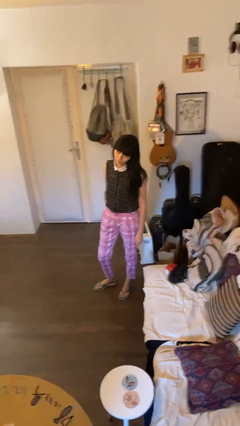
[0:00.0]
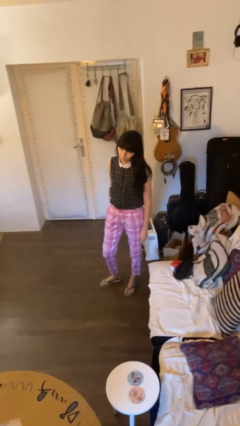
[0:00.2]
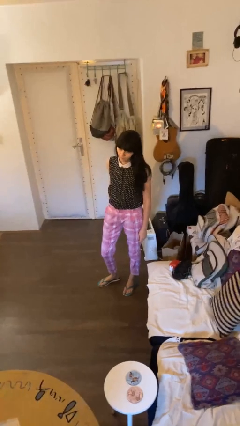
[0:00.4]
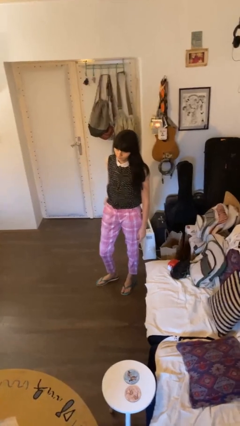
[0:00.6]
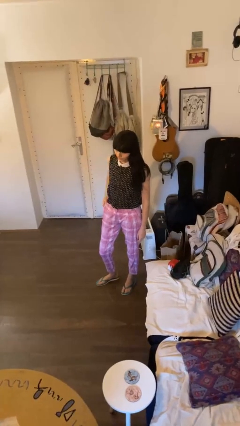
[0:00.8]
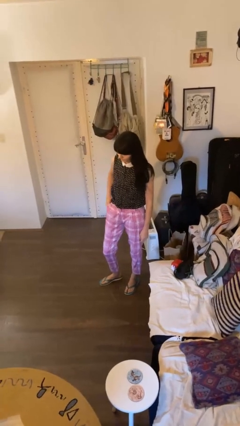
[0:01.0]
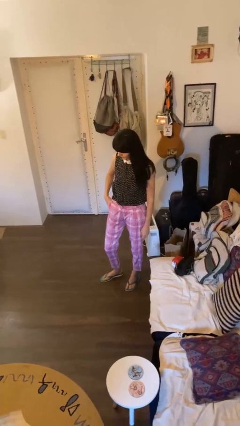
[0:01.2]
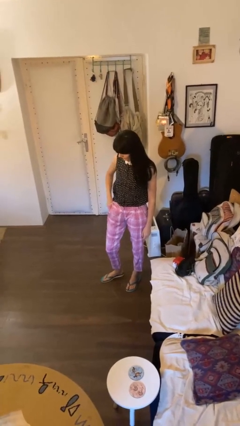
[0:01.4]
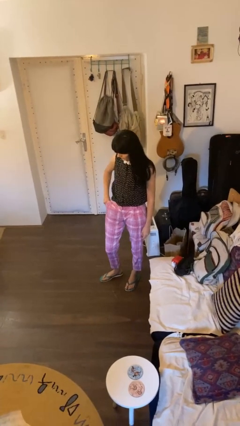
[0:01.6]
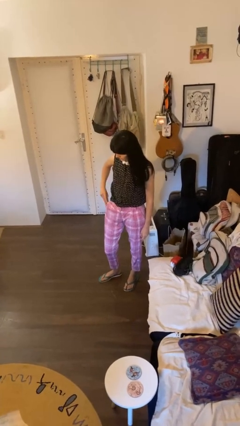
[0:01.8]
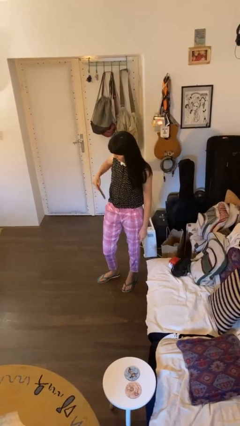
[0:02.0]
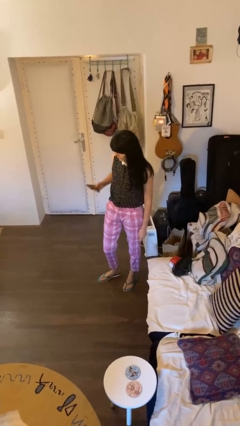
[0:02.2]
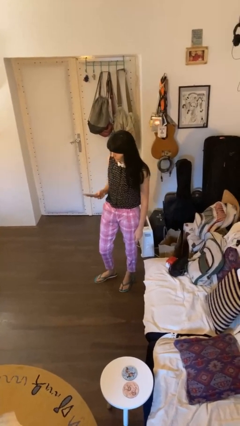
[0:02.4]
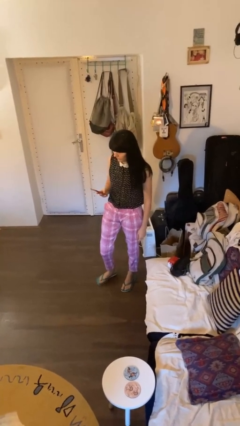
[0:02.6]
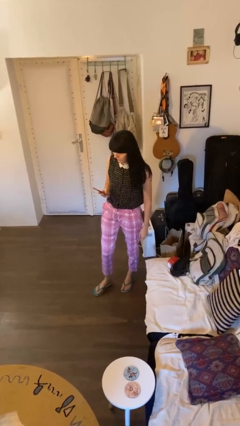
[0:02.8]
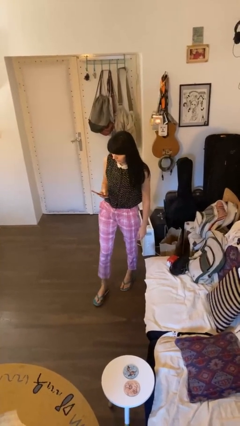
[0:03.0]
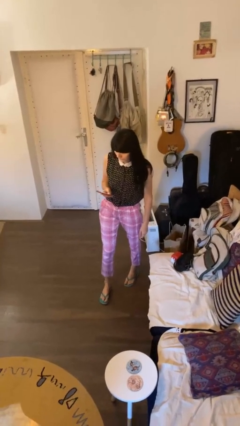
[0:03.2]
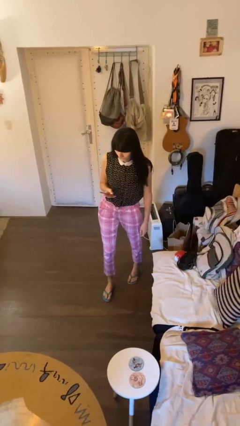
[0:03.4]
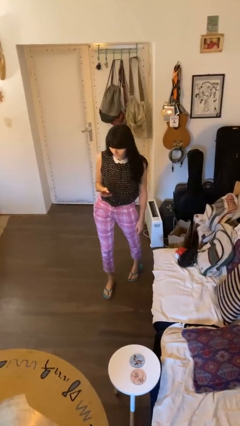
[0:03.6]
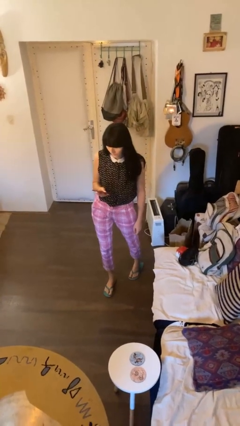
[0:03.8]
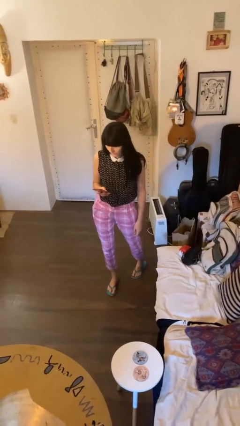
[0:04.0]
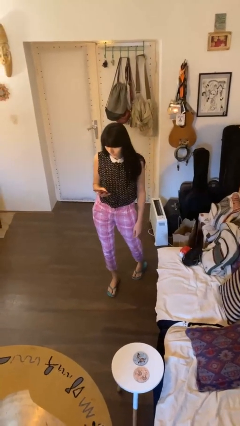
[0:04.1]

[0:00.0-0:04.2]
person takes phone from pocket

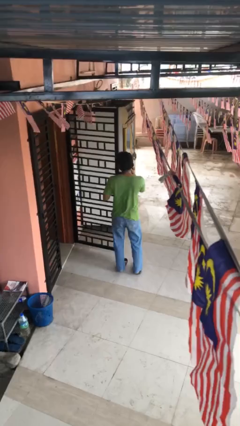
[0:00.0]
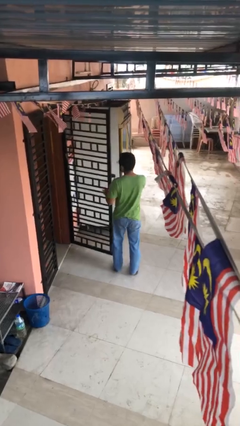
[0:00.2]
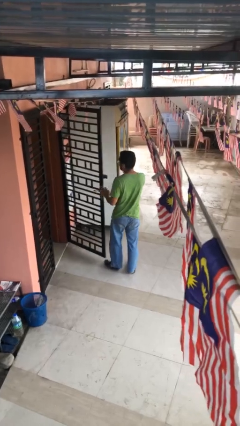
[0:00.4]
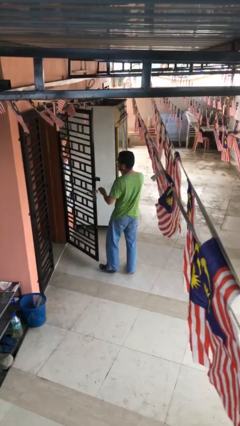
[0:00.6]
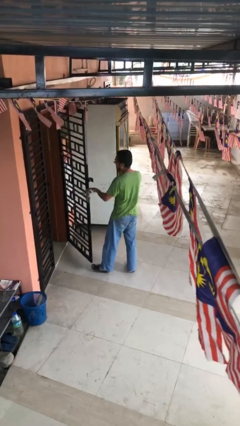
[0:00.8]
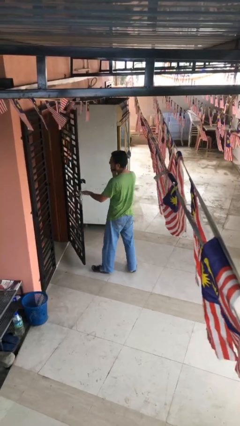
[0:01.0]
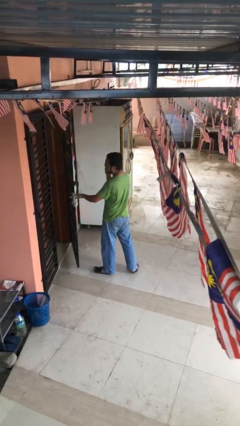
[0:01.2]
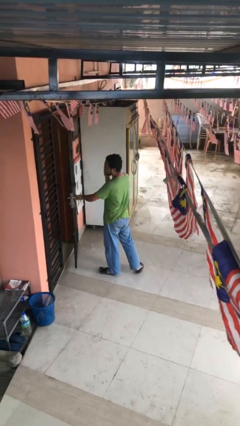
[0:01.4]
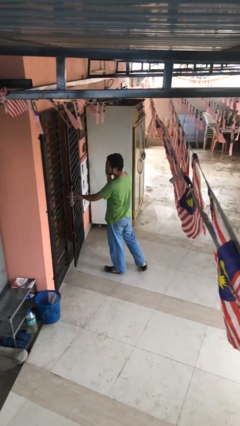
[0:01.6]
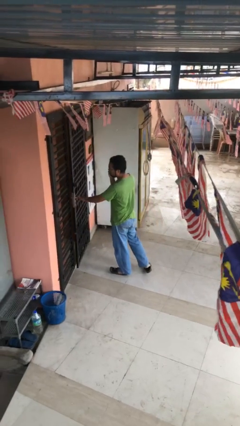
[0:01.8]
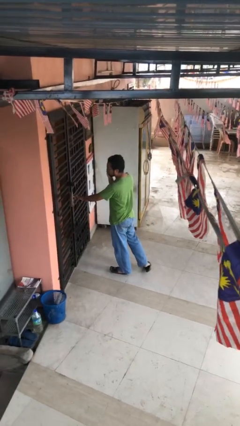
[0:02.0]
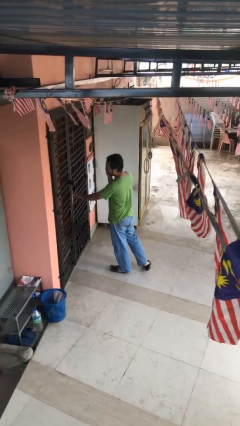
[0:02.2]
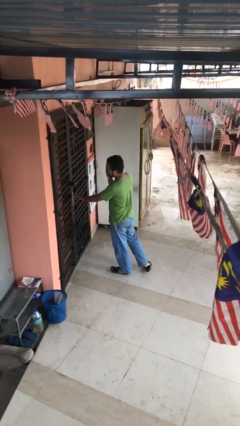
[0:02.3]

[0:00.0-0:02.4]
person closes facility door

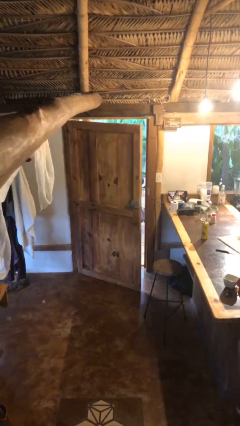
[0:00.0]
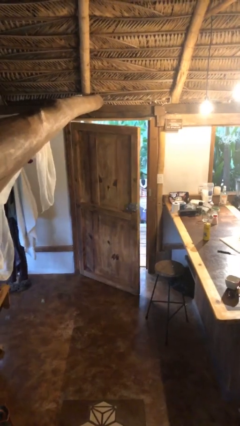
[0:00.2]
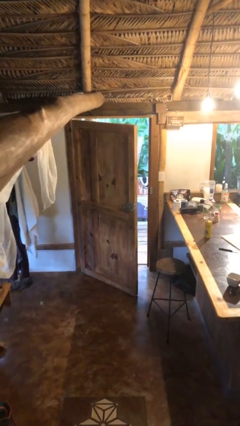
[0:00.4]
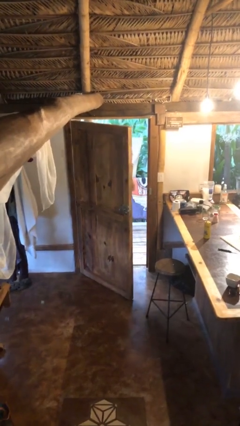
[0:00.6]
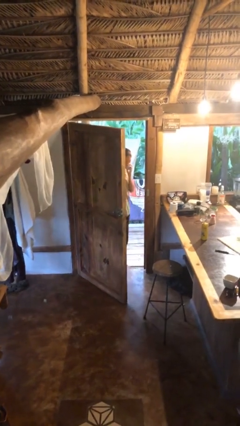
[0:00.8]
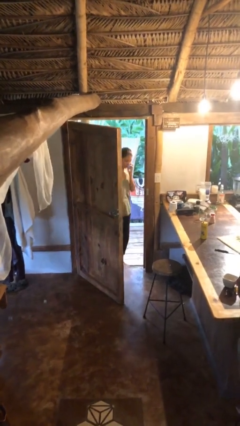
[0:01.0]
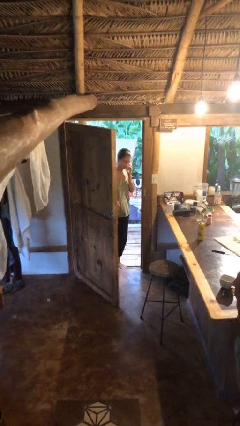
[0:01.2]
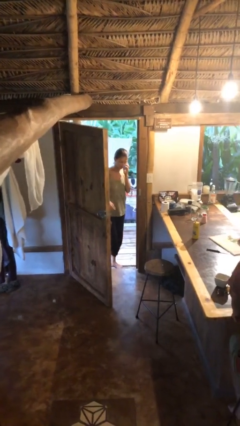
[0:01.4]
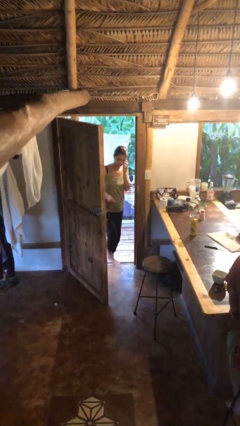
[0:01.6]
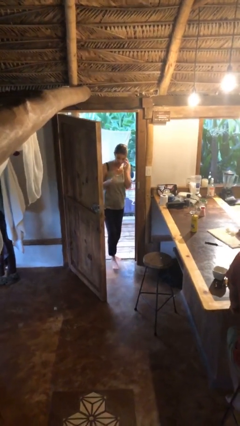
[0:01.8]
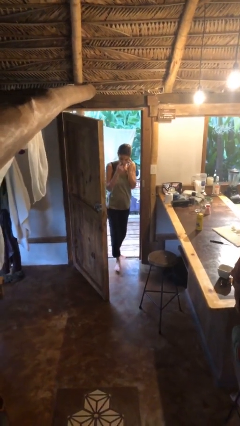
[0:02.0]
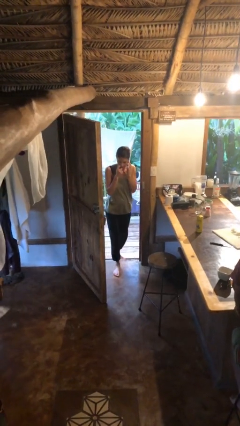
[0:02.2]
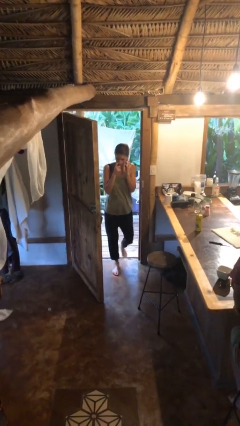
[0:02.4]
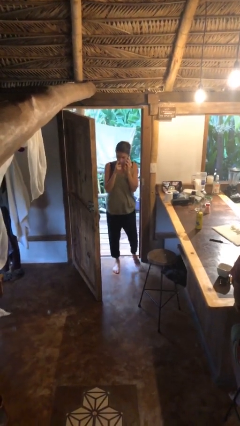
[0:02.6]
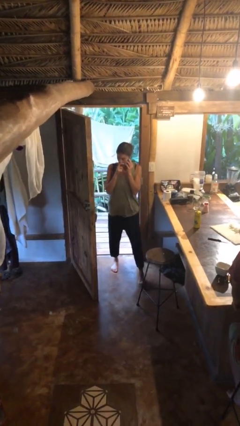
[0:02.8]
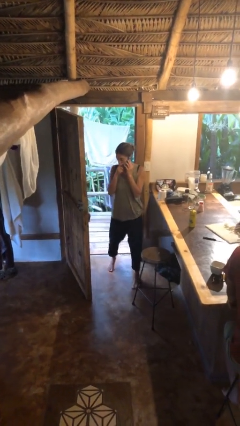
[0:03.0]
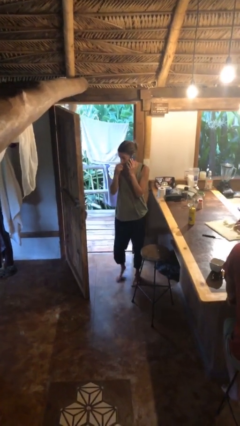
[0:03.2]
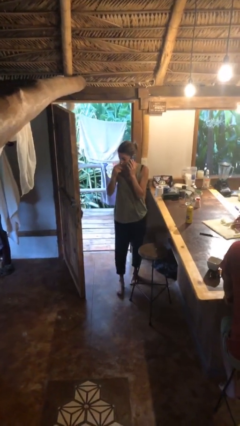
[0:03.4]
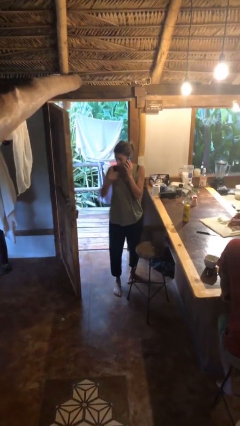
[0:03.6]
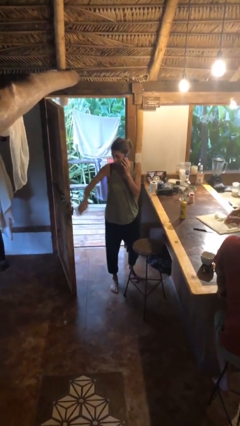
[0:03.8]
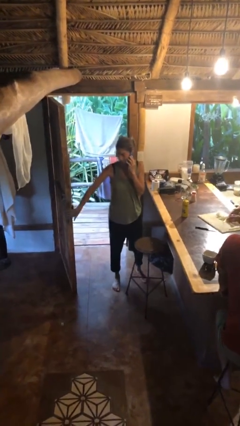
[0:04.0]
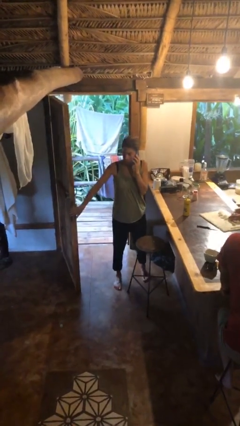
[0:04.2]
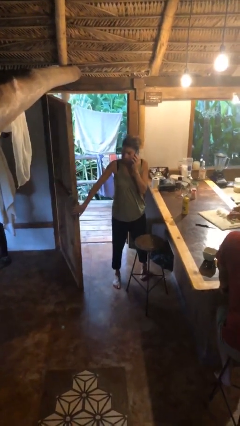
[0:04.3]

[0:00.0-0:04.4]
person enters scene through structure

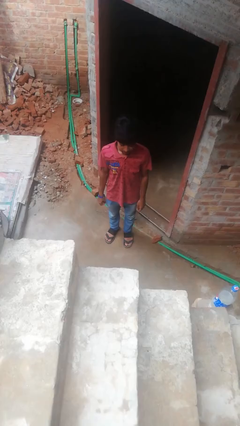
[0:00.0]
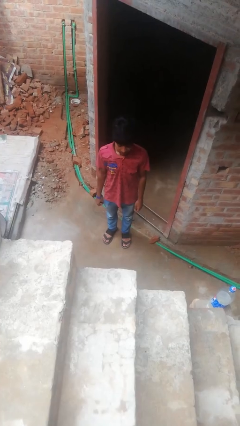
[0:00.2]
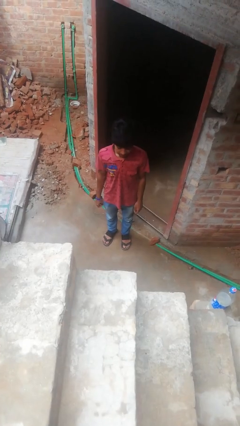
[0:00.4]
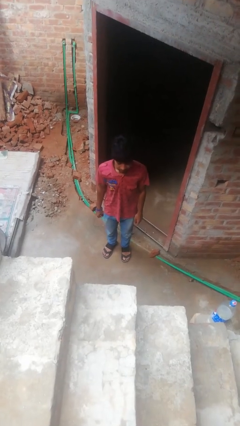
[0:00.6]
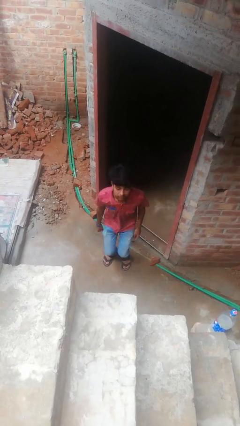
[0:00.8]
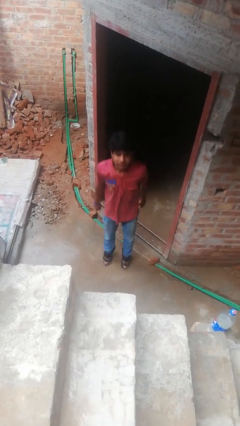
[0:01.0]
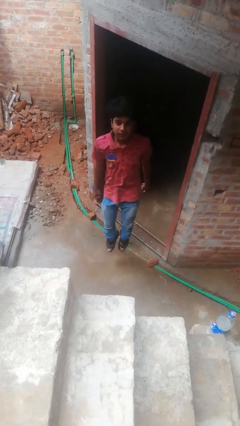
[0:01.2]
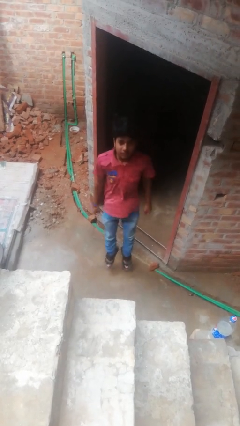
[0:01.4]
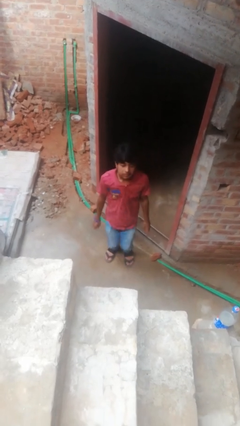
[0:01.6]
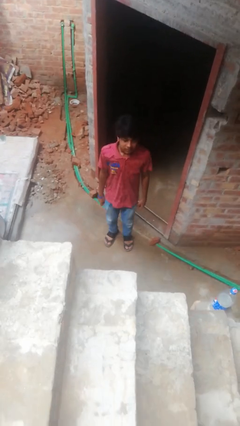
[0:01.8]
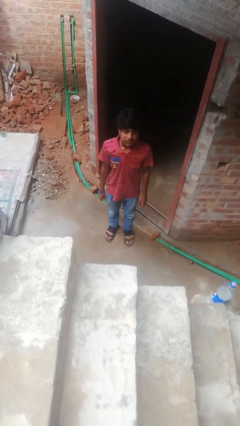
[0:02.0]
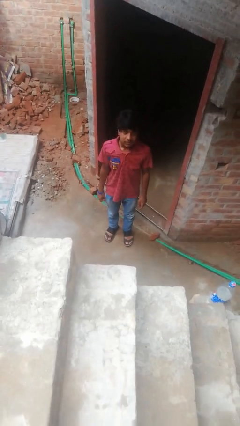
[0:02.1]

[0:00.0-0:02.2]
person jumps

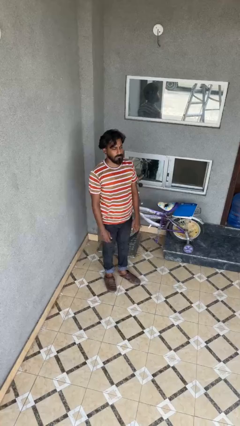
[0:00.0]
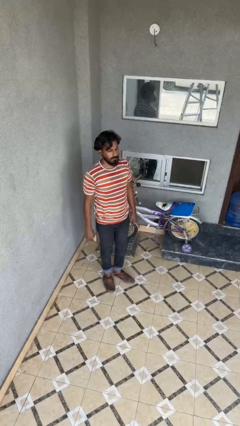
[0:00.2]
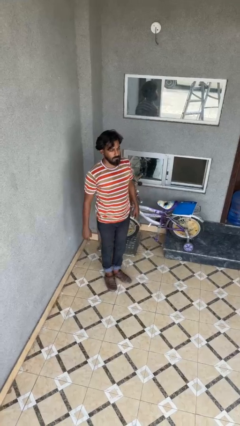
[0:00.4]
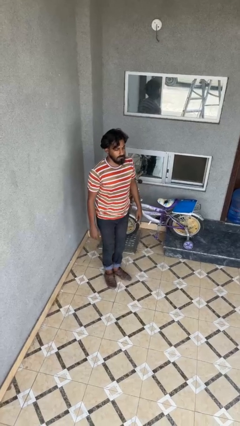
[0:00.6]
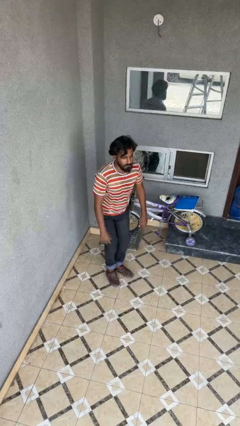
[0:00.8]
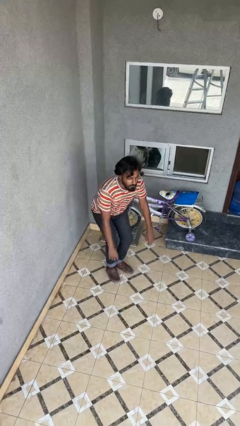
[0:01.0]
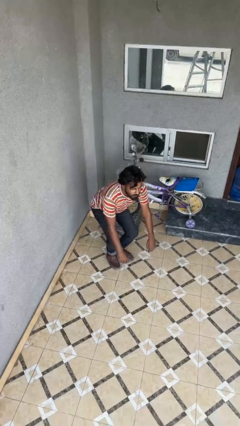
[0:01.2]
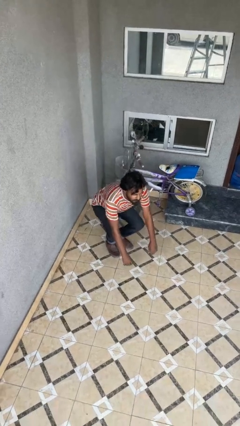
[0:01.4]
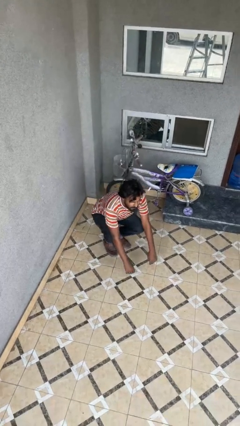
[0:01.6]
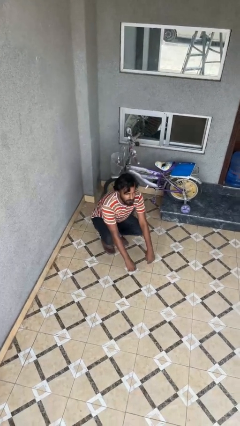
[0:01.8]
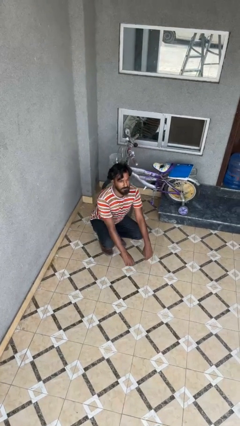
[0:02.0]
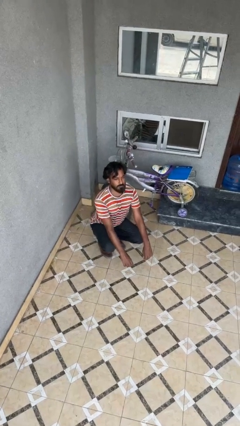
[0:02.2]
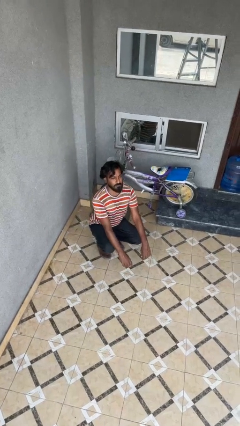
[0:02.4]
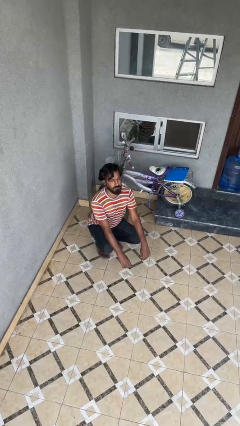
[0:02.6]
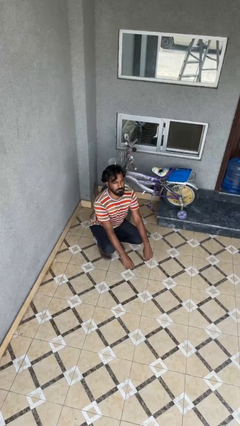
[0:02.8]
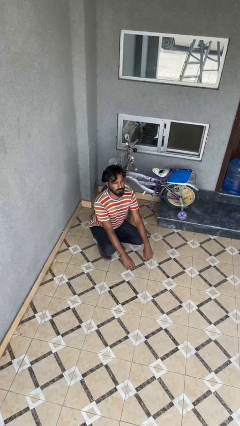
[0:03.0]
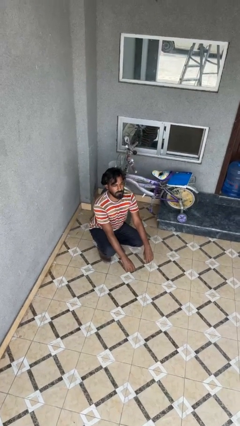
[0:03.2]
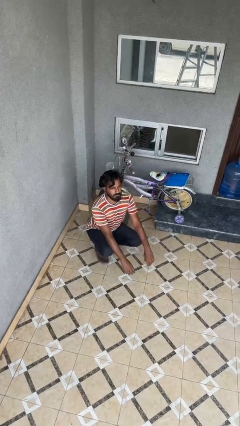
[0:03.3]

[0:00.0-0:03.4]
person squats

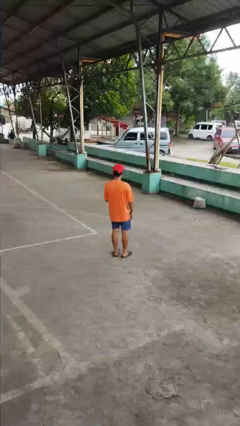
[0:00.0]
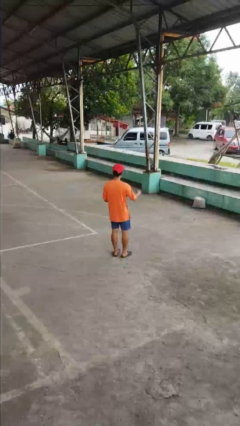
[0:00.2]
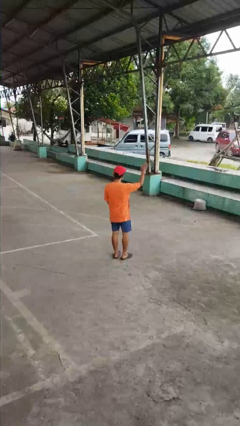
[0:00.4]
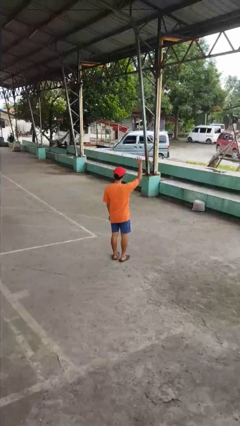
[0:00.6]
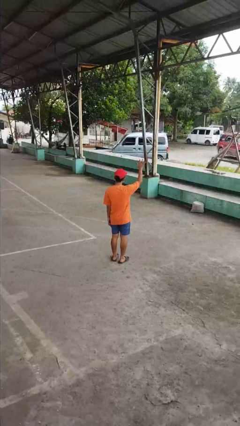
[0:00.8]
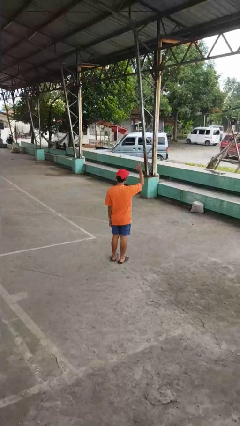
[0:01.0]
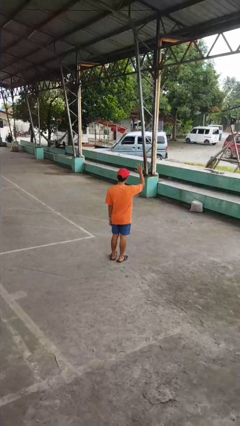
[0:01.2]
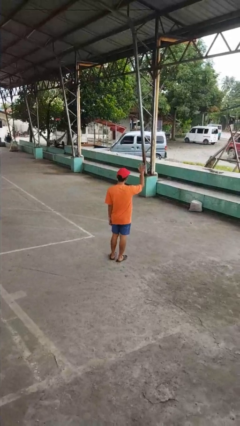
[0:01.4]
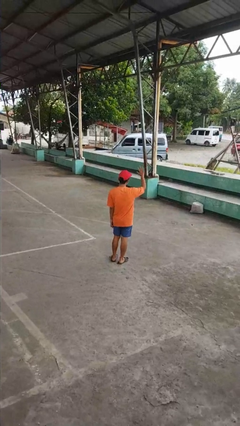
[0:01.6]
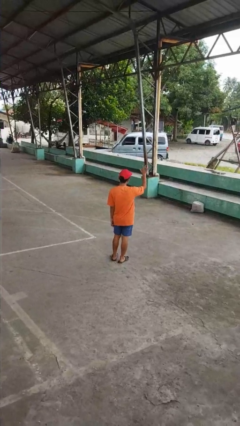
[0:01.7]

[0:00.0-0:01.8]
person waves at person
